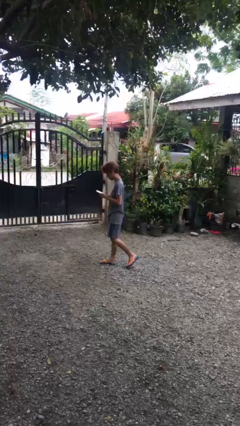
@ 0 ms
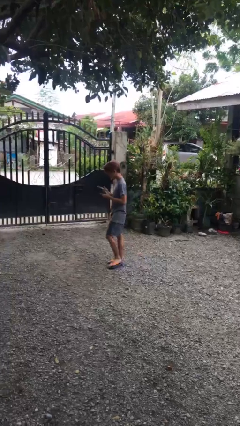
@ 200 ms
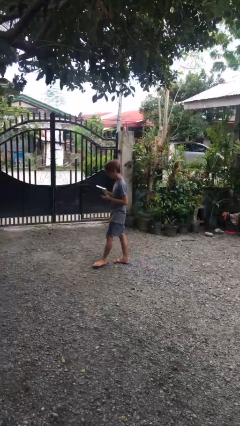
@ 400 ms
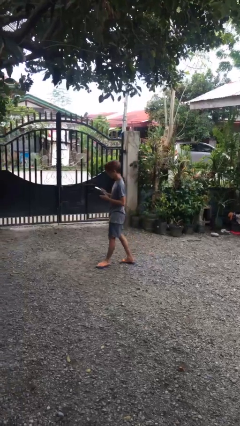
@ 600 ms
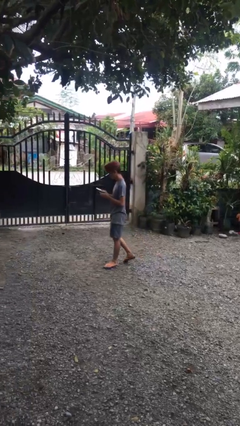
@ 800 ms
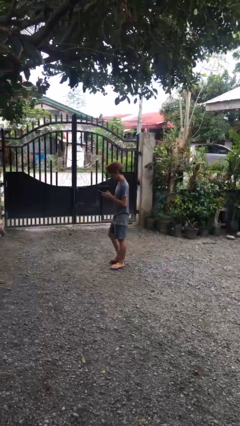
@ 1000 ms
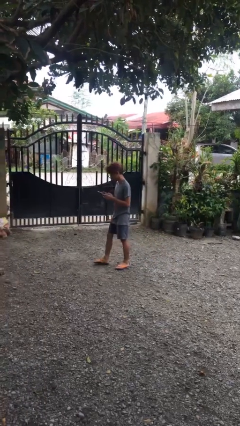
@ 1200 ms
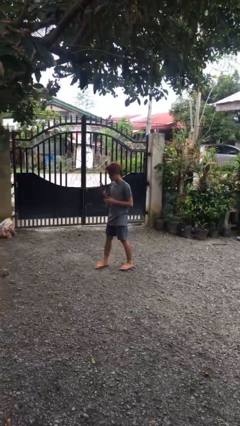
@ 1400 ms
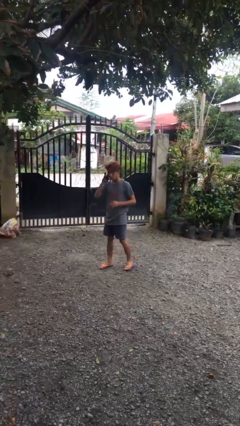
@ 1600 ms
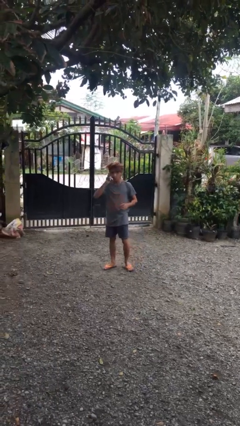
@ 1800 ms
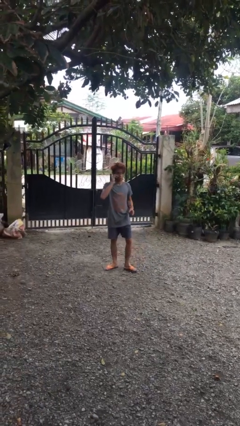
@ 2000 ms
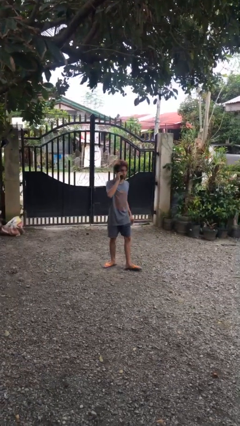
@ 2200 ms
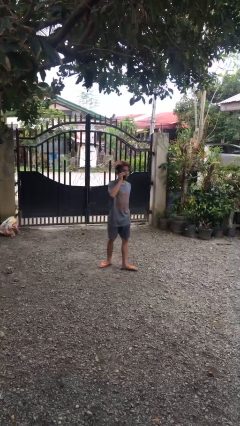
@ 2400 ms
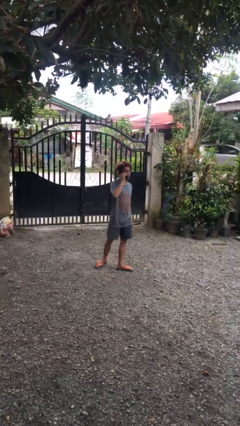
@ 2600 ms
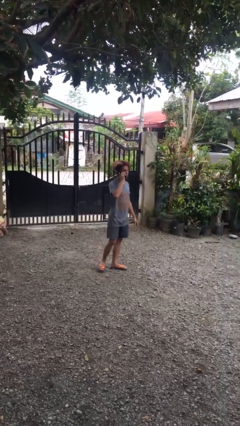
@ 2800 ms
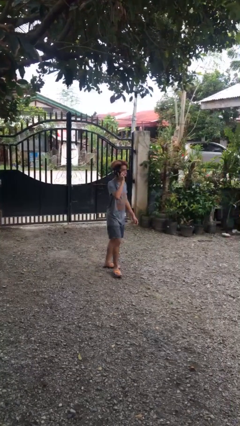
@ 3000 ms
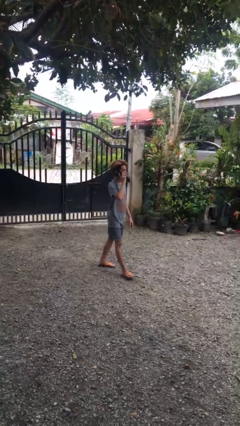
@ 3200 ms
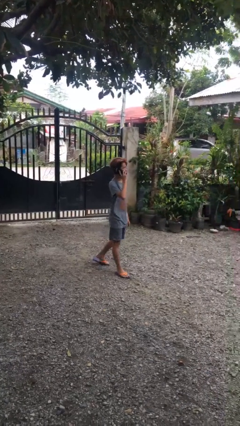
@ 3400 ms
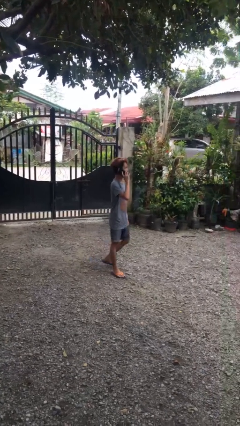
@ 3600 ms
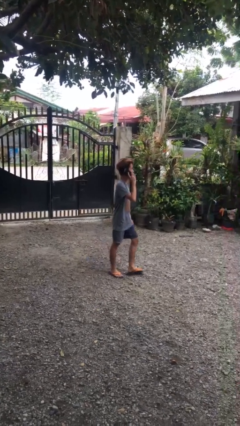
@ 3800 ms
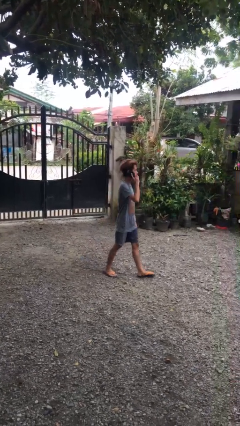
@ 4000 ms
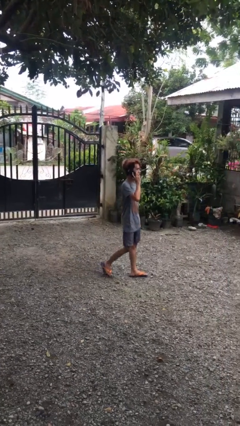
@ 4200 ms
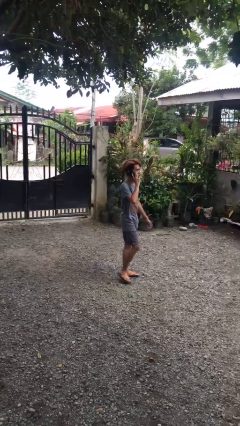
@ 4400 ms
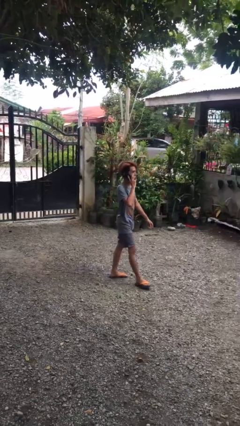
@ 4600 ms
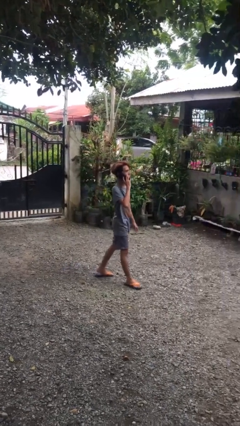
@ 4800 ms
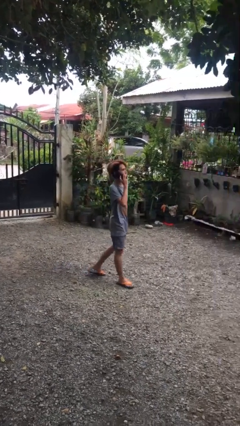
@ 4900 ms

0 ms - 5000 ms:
person talks on phone

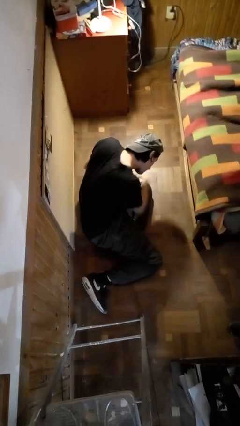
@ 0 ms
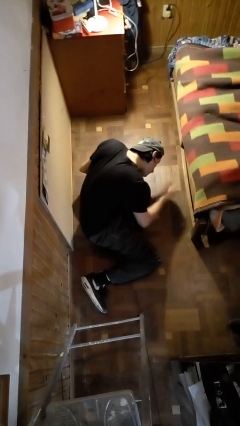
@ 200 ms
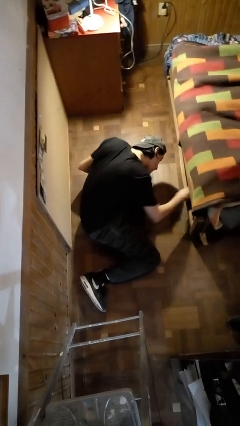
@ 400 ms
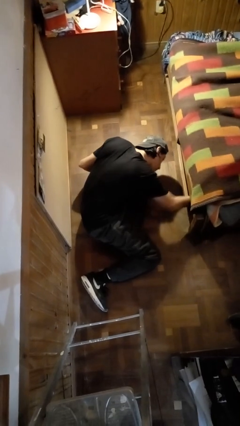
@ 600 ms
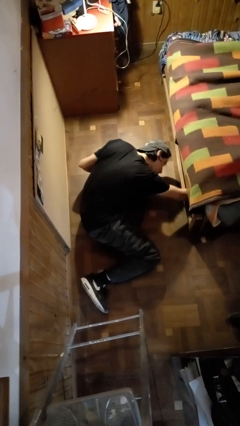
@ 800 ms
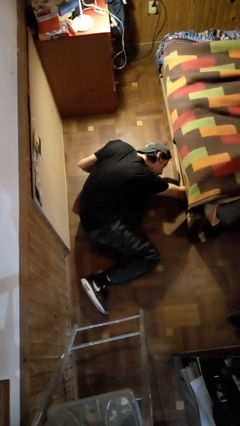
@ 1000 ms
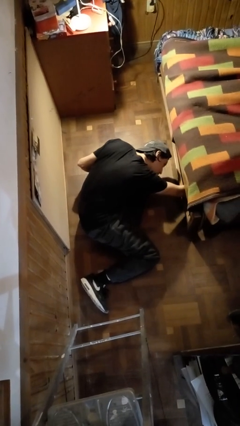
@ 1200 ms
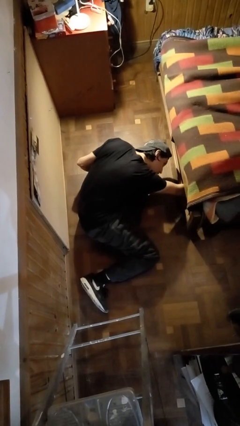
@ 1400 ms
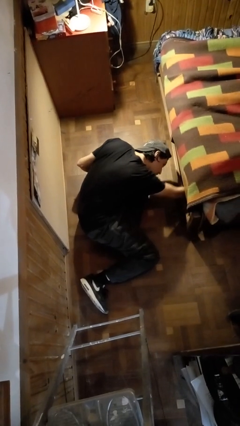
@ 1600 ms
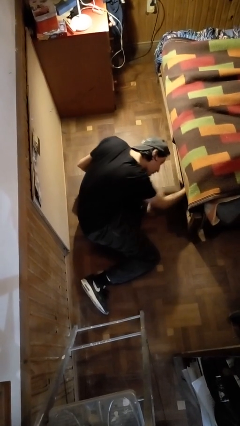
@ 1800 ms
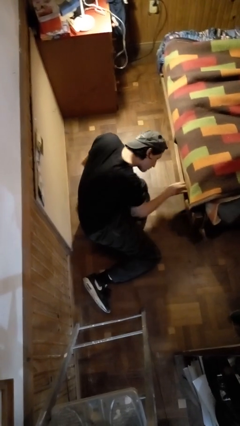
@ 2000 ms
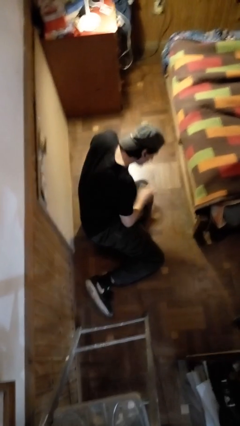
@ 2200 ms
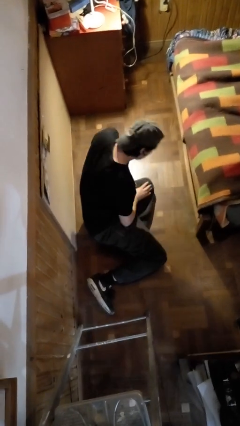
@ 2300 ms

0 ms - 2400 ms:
person searches under bed

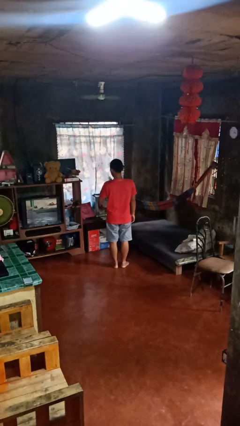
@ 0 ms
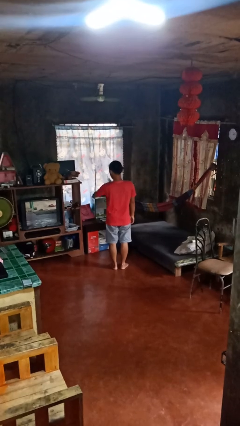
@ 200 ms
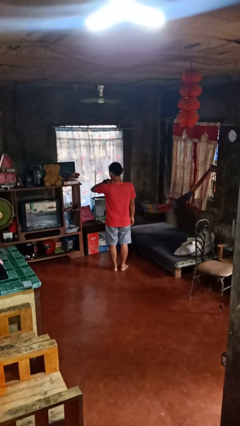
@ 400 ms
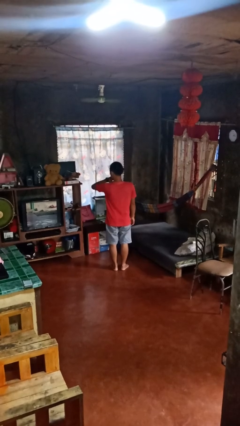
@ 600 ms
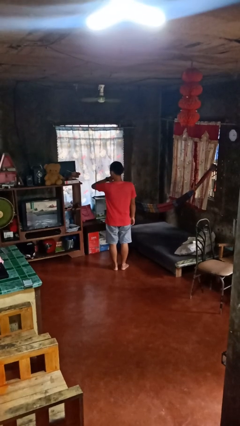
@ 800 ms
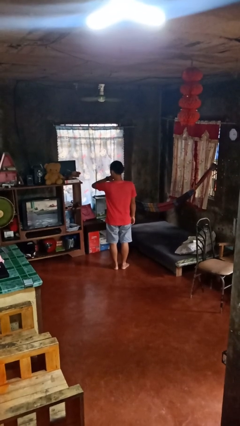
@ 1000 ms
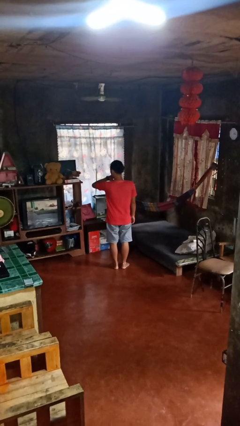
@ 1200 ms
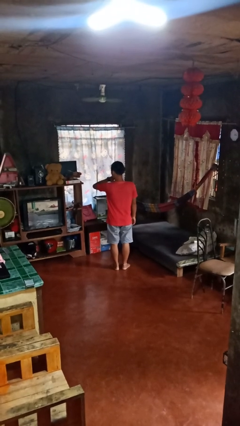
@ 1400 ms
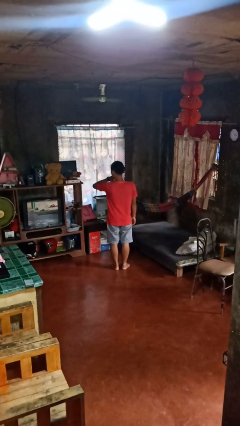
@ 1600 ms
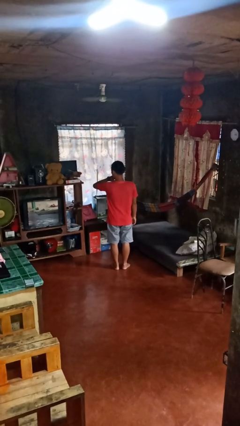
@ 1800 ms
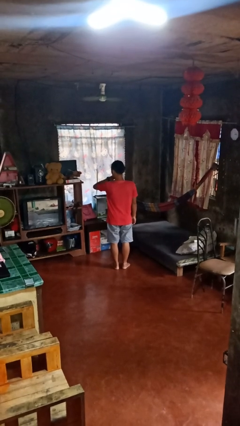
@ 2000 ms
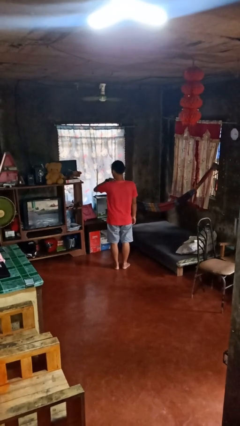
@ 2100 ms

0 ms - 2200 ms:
person looks at wristwatch

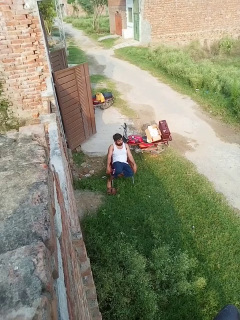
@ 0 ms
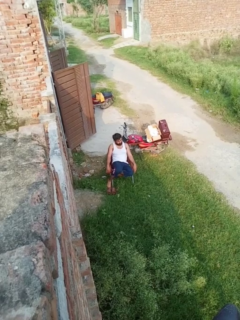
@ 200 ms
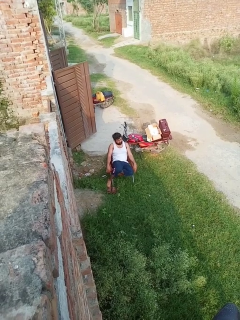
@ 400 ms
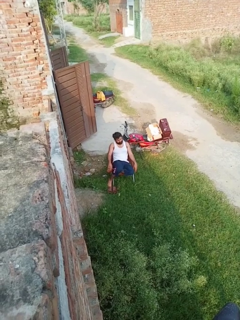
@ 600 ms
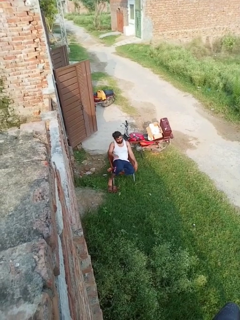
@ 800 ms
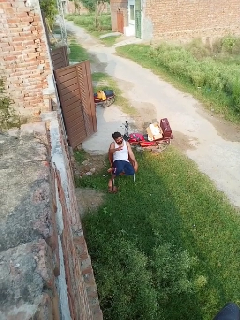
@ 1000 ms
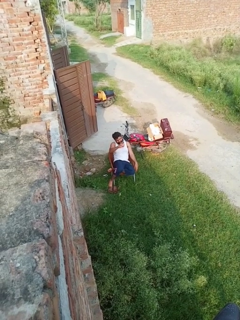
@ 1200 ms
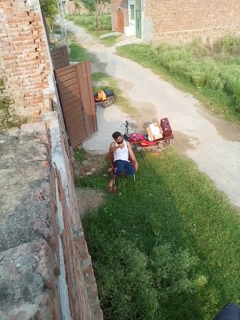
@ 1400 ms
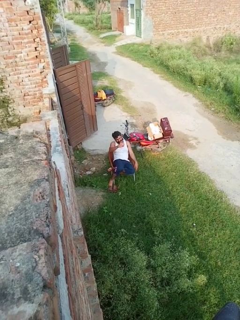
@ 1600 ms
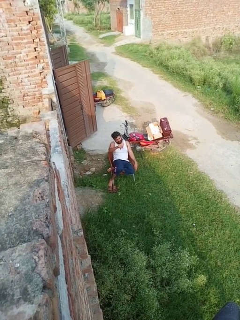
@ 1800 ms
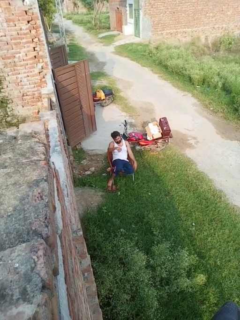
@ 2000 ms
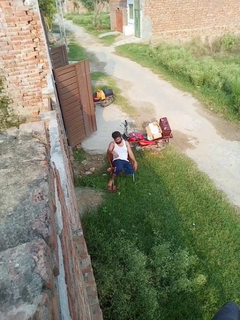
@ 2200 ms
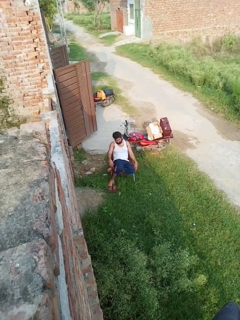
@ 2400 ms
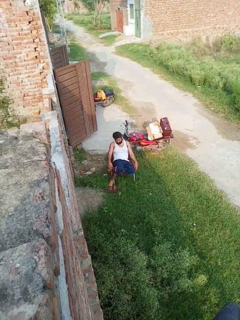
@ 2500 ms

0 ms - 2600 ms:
person gestures come here

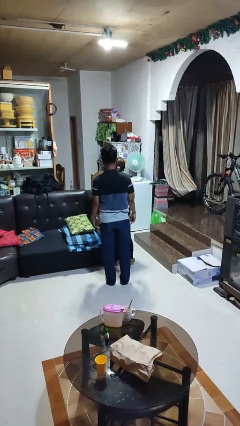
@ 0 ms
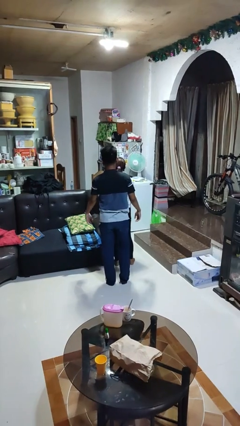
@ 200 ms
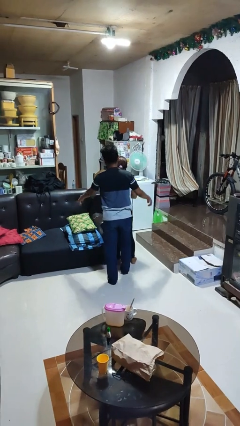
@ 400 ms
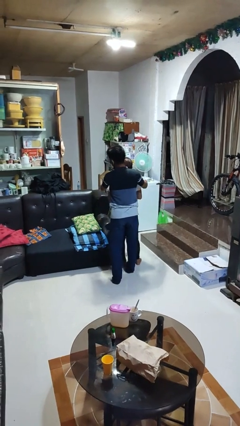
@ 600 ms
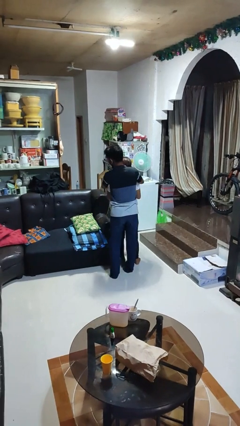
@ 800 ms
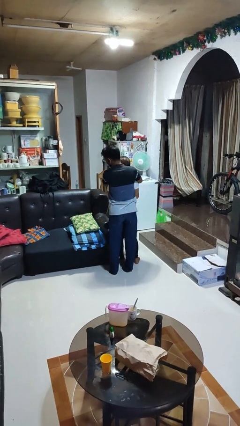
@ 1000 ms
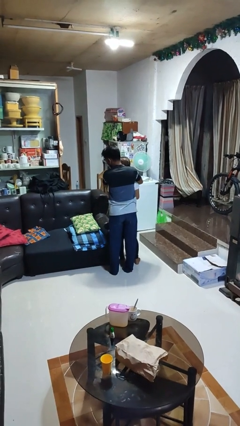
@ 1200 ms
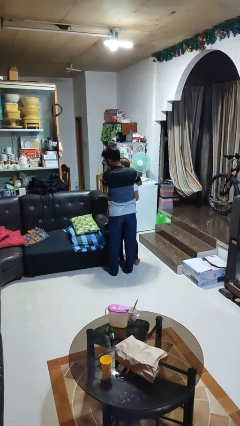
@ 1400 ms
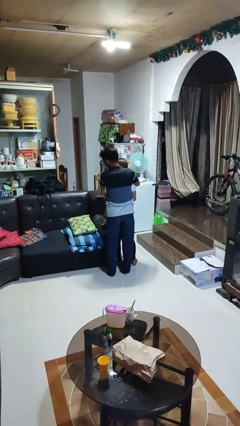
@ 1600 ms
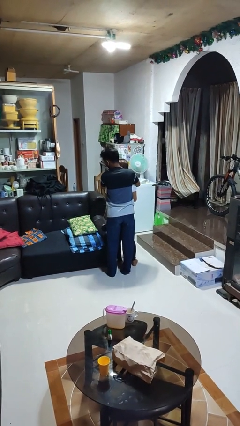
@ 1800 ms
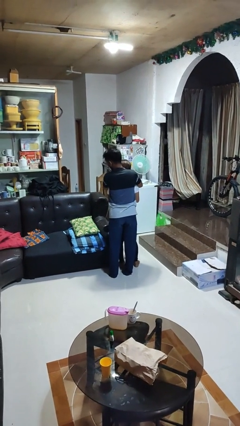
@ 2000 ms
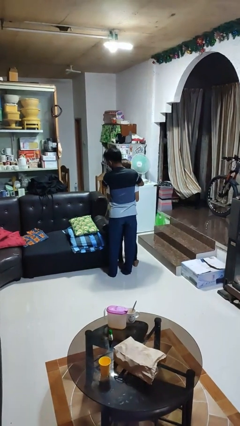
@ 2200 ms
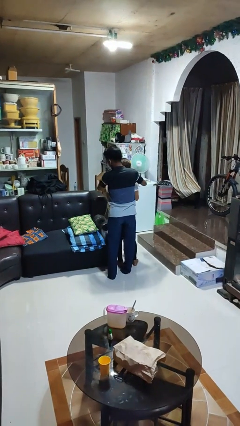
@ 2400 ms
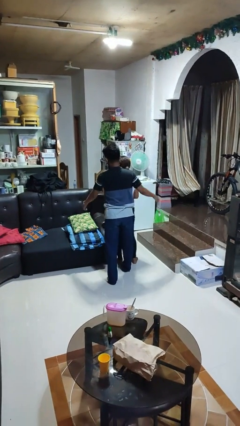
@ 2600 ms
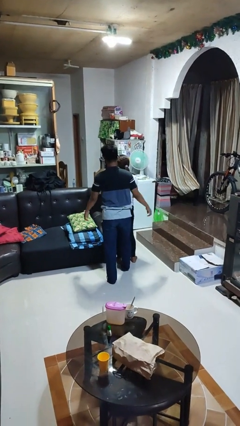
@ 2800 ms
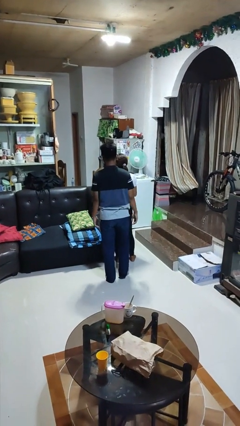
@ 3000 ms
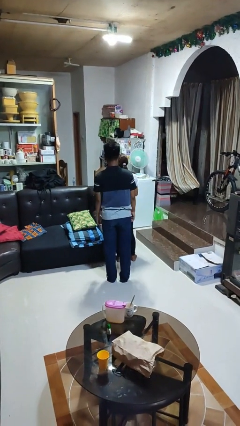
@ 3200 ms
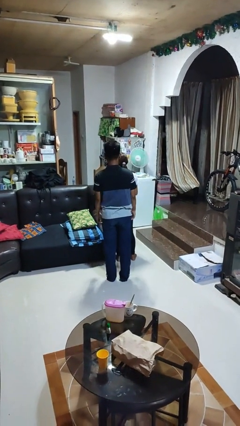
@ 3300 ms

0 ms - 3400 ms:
person hugs person from behind

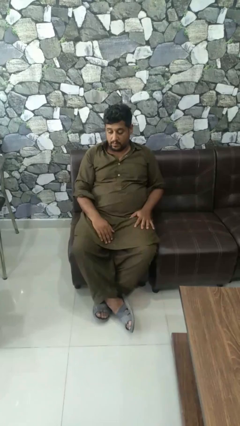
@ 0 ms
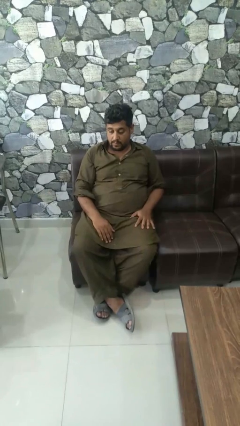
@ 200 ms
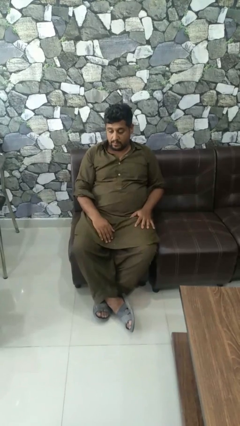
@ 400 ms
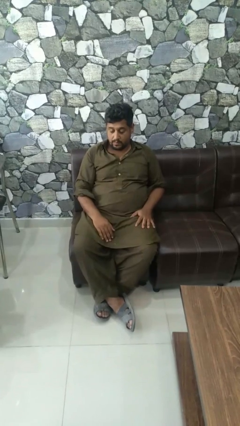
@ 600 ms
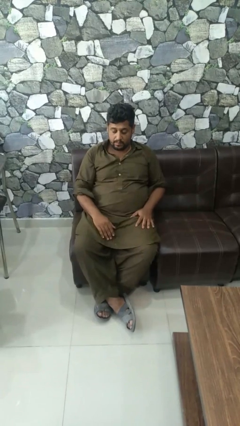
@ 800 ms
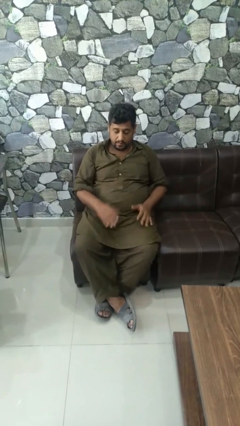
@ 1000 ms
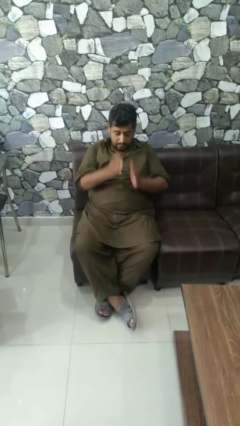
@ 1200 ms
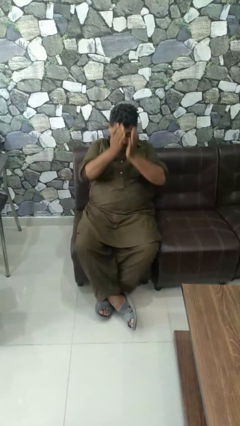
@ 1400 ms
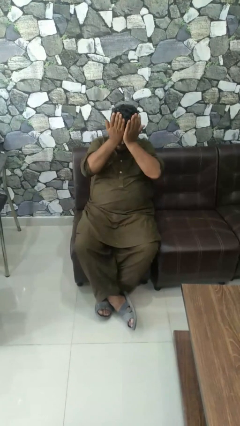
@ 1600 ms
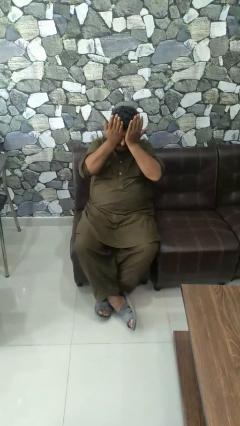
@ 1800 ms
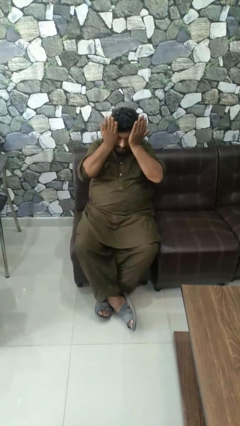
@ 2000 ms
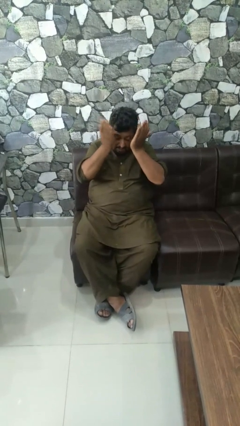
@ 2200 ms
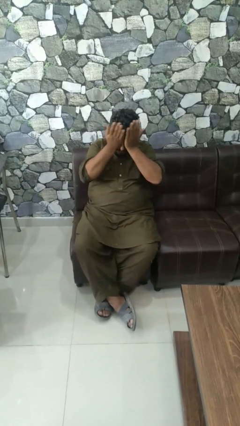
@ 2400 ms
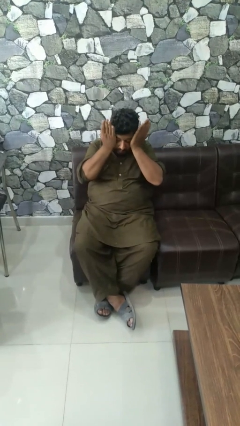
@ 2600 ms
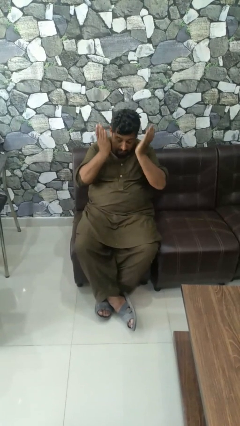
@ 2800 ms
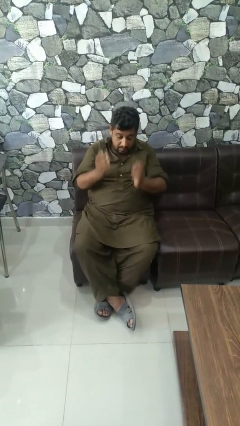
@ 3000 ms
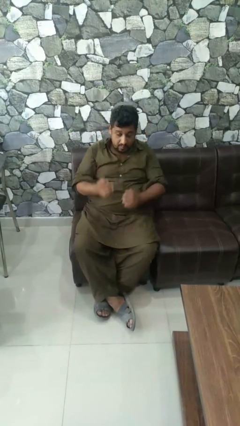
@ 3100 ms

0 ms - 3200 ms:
person rubs eyes
